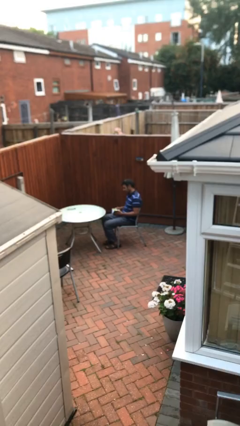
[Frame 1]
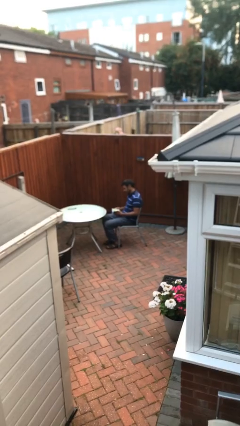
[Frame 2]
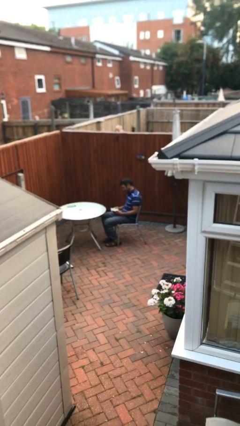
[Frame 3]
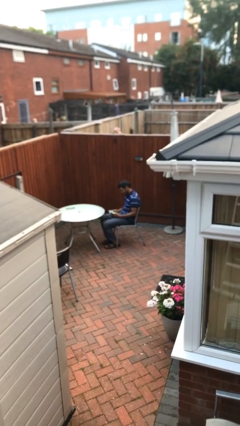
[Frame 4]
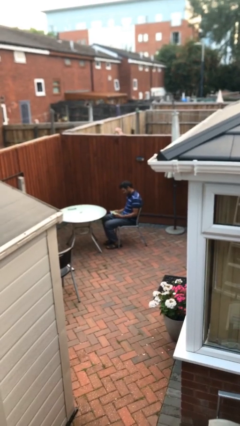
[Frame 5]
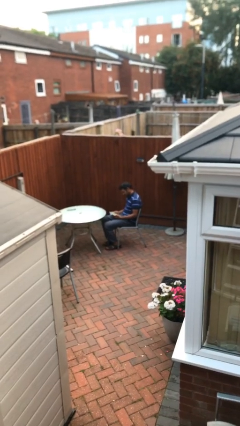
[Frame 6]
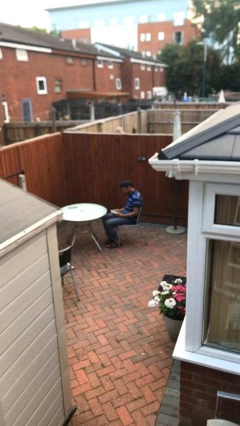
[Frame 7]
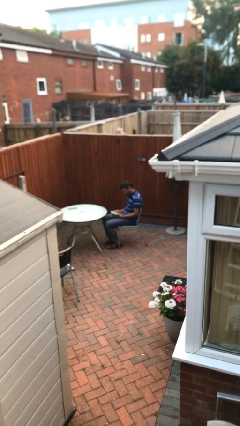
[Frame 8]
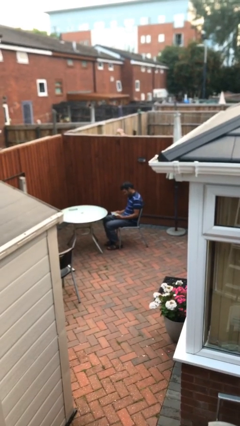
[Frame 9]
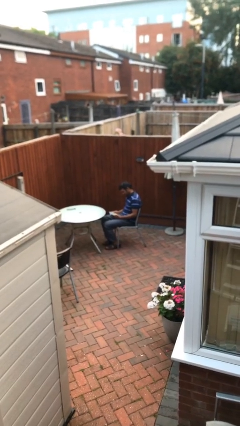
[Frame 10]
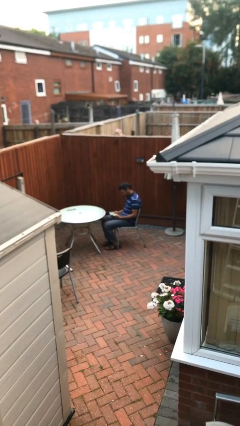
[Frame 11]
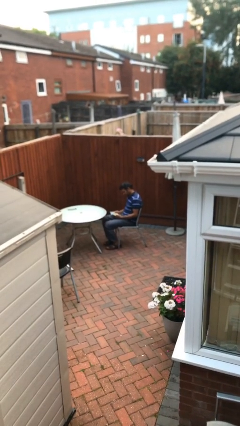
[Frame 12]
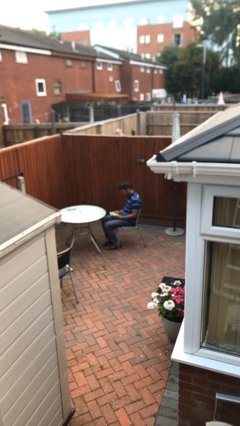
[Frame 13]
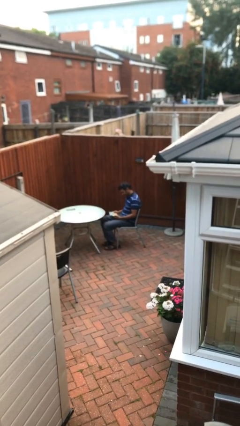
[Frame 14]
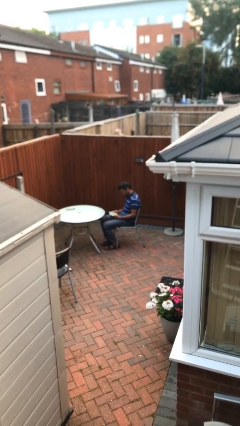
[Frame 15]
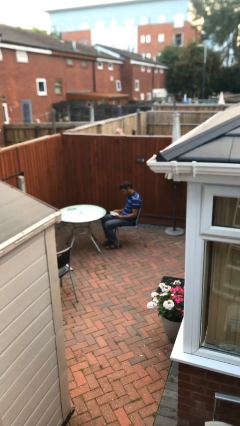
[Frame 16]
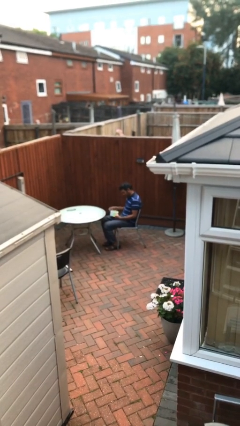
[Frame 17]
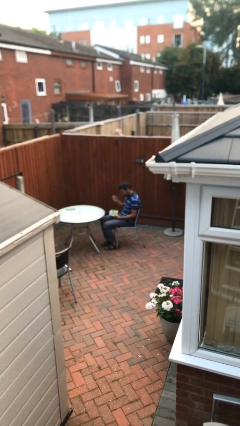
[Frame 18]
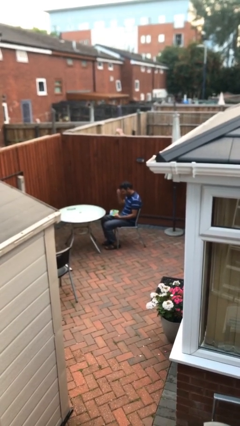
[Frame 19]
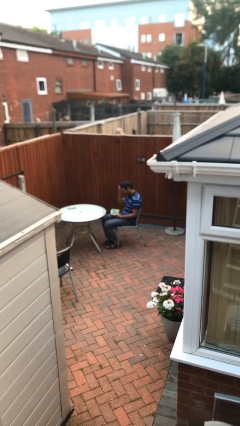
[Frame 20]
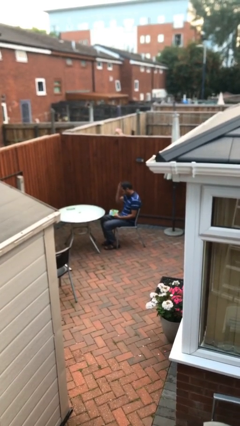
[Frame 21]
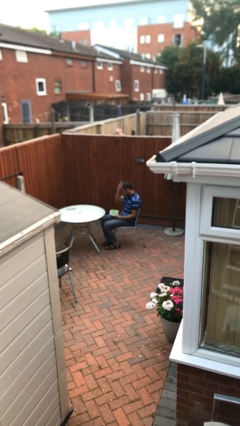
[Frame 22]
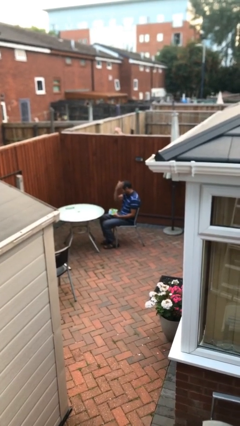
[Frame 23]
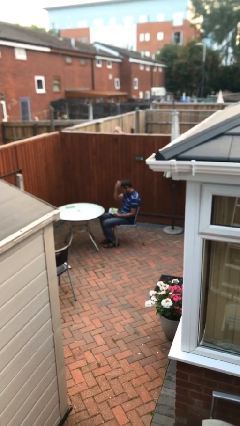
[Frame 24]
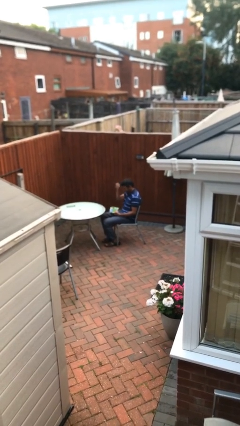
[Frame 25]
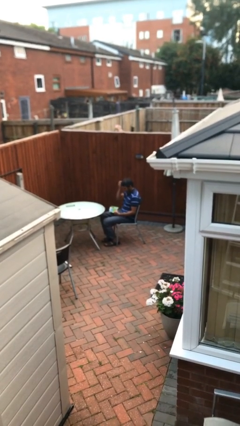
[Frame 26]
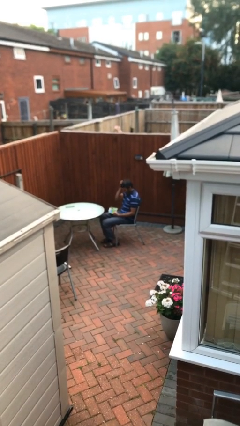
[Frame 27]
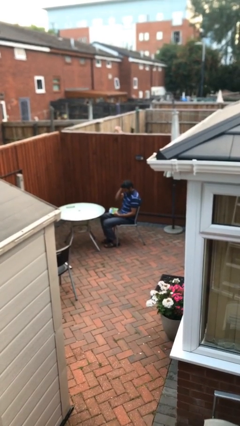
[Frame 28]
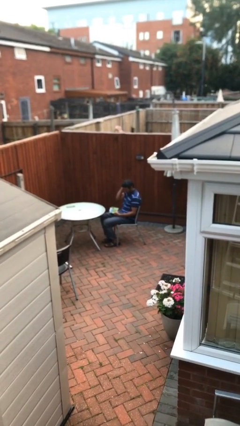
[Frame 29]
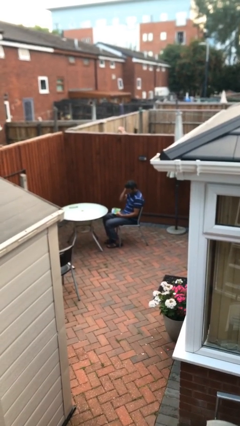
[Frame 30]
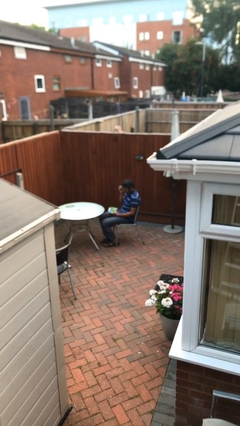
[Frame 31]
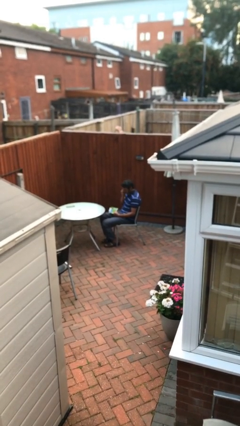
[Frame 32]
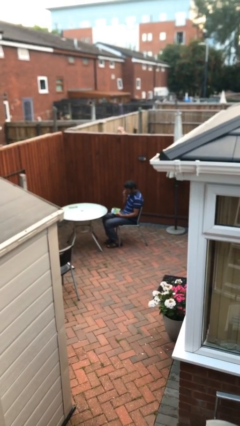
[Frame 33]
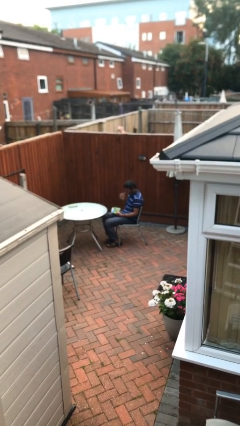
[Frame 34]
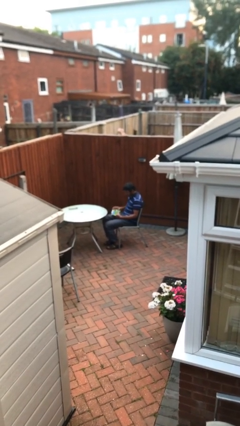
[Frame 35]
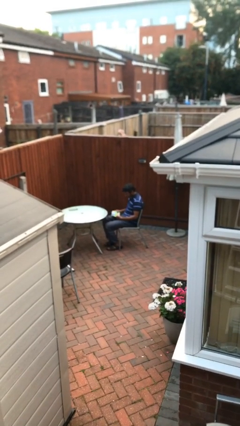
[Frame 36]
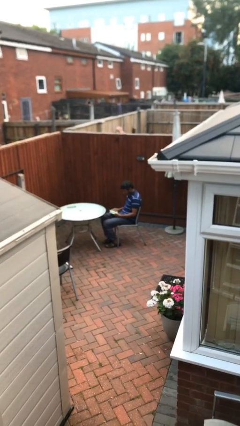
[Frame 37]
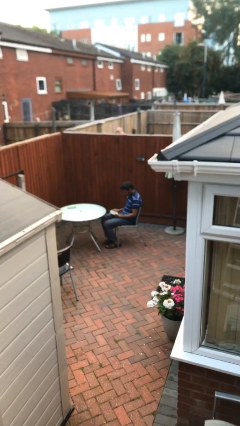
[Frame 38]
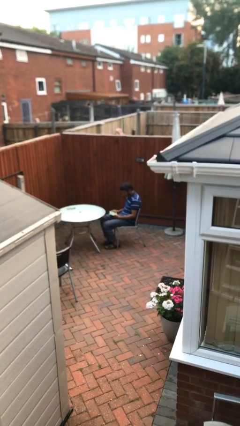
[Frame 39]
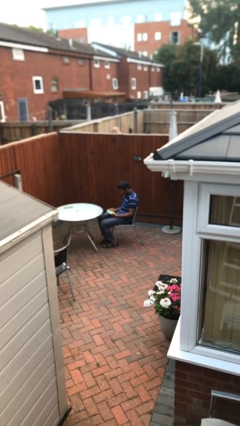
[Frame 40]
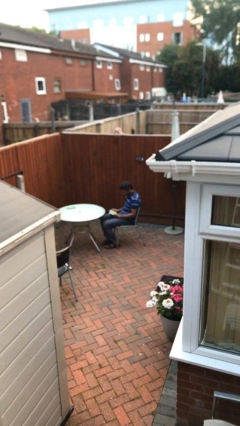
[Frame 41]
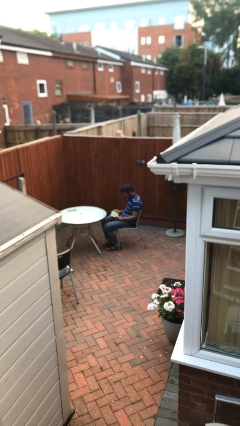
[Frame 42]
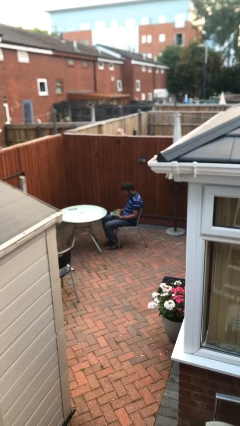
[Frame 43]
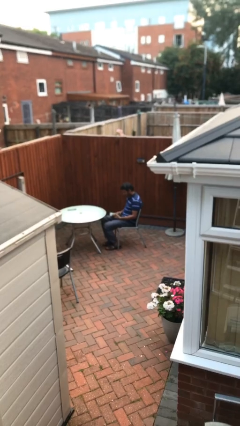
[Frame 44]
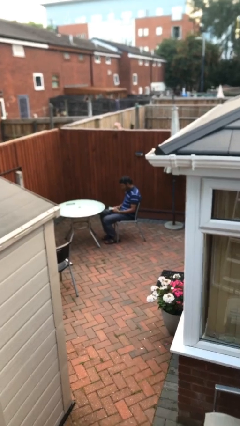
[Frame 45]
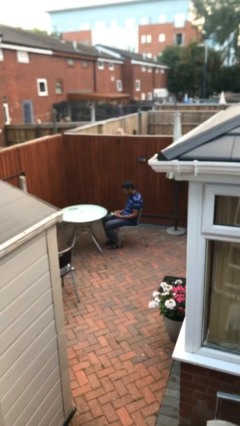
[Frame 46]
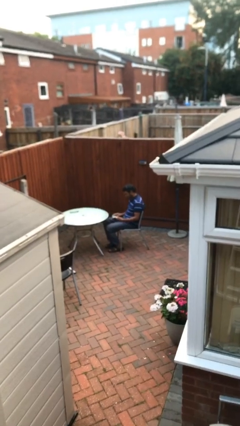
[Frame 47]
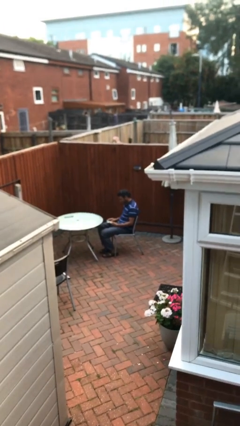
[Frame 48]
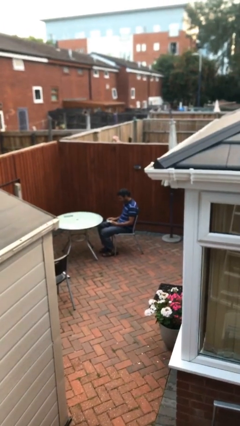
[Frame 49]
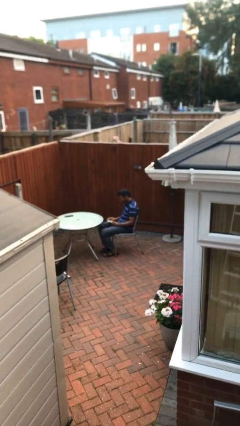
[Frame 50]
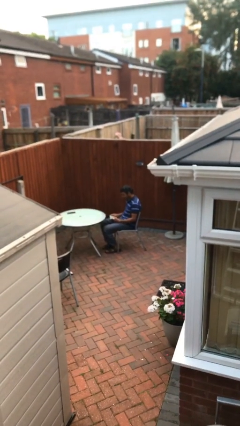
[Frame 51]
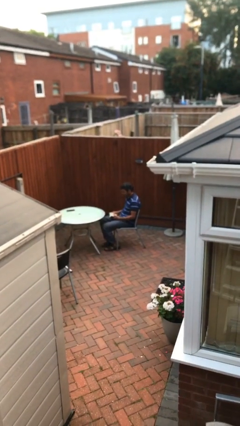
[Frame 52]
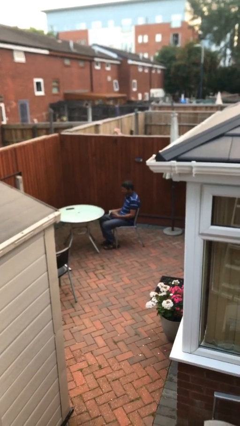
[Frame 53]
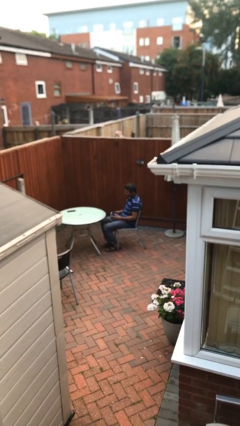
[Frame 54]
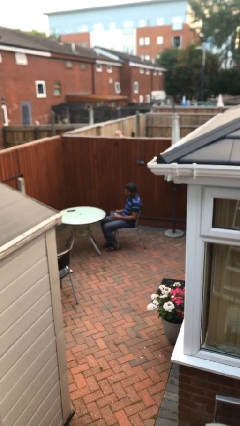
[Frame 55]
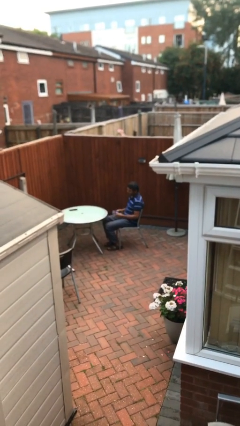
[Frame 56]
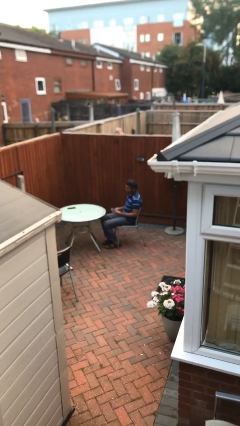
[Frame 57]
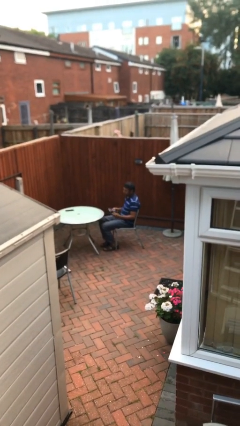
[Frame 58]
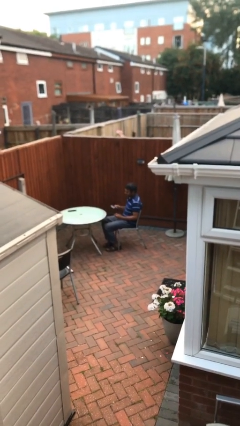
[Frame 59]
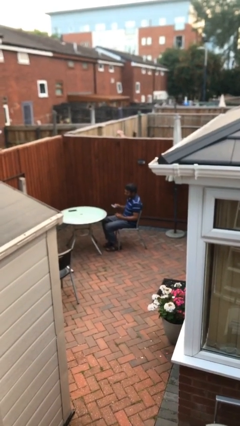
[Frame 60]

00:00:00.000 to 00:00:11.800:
person reads document

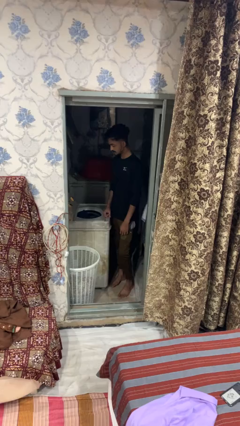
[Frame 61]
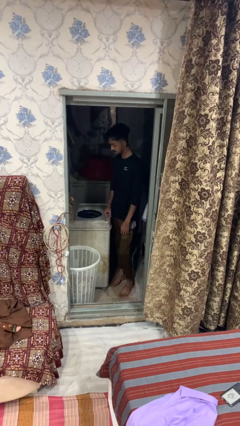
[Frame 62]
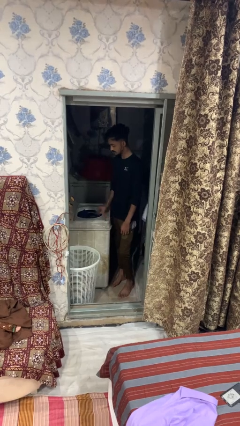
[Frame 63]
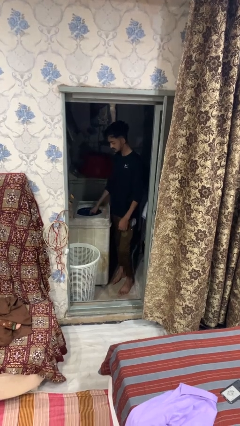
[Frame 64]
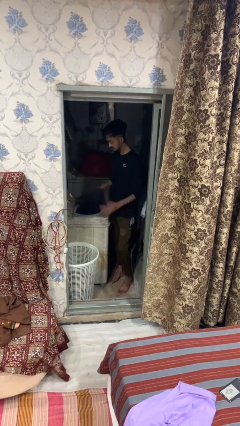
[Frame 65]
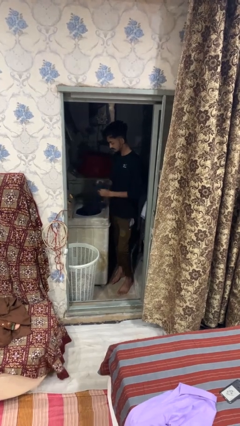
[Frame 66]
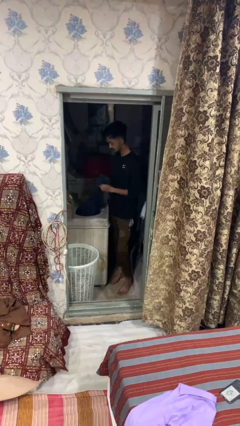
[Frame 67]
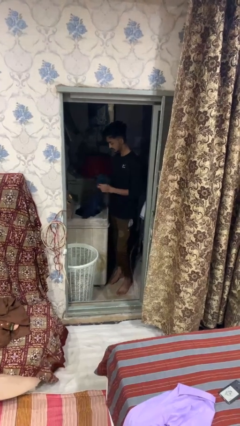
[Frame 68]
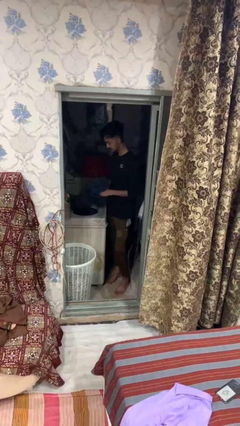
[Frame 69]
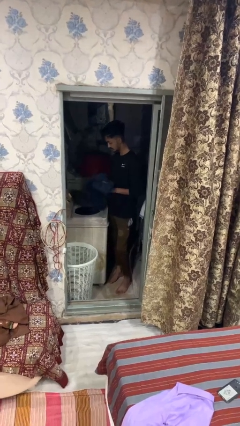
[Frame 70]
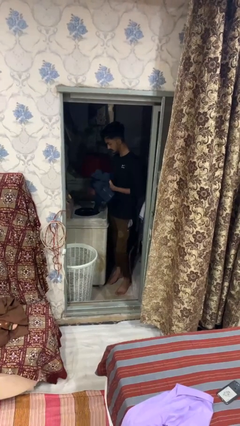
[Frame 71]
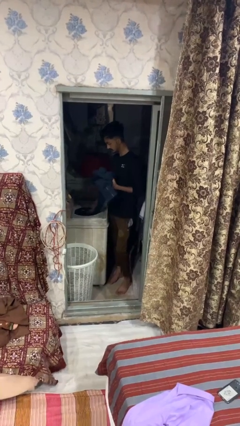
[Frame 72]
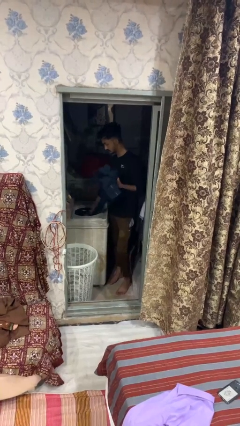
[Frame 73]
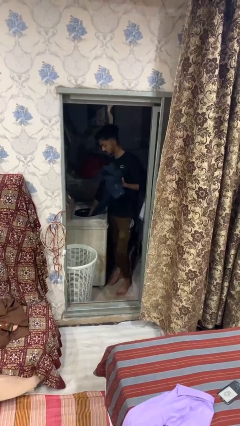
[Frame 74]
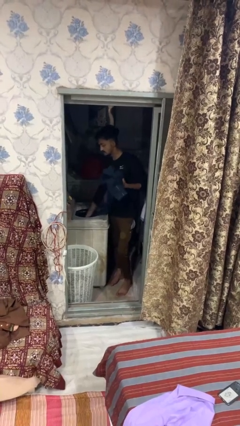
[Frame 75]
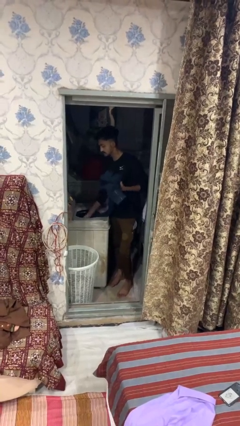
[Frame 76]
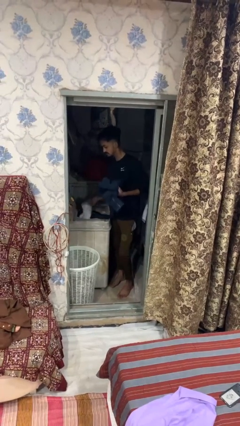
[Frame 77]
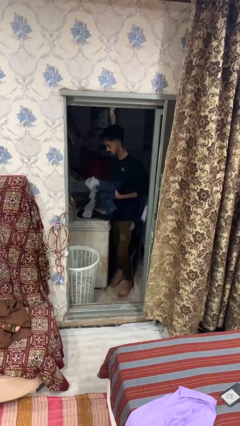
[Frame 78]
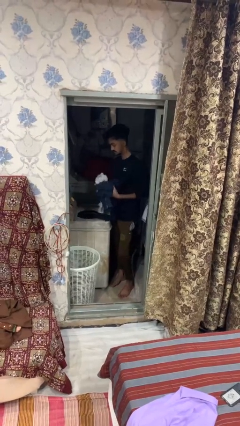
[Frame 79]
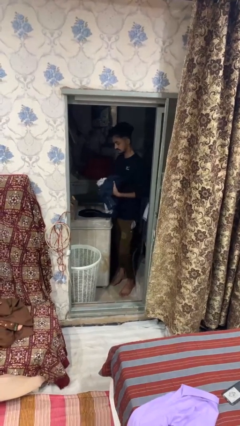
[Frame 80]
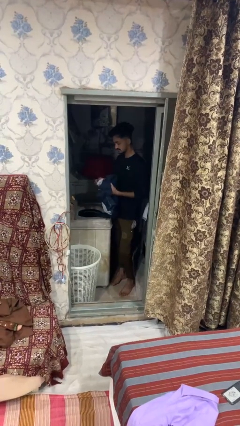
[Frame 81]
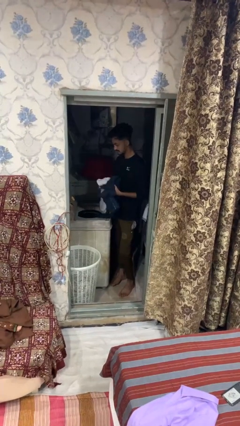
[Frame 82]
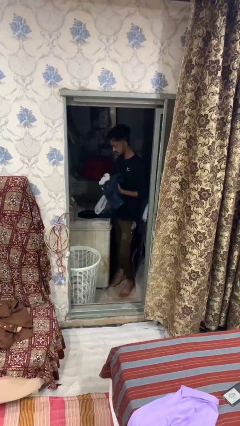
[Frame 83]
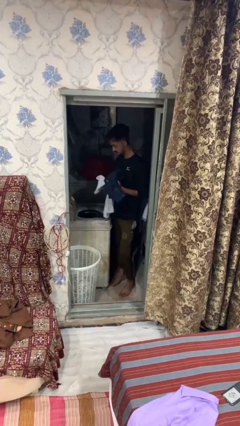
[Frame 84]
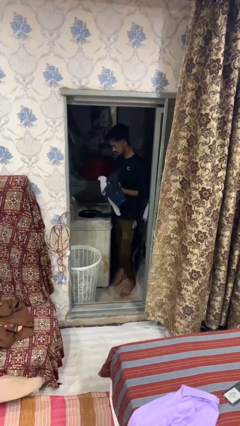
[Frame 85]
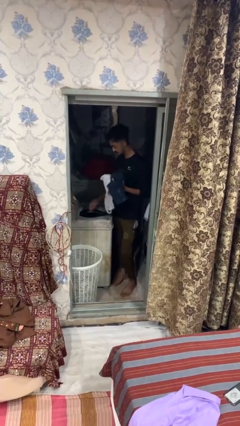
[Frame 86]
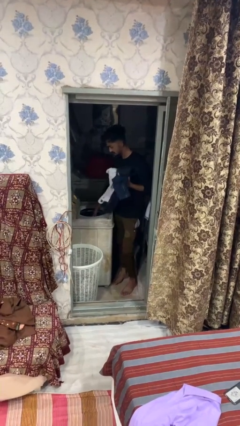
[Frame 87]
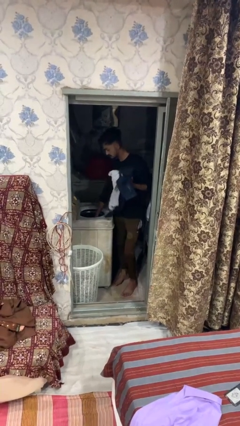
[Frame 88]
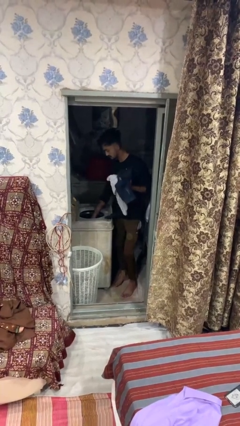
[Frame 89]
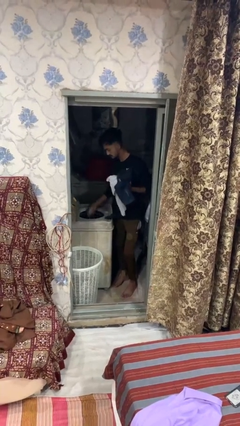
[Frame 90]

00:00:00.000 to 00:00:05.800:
person unloads clotheswasher

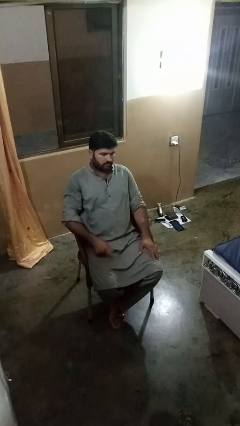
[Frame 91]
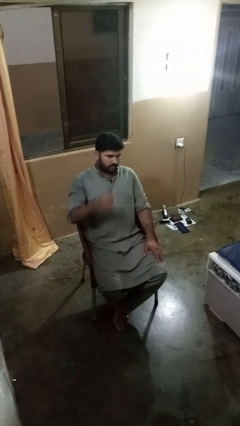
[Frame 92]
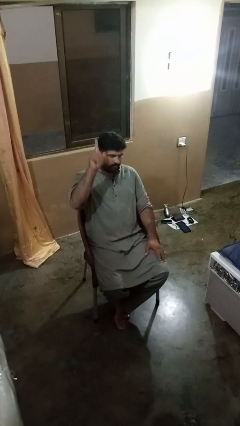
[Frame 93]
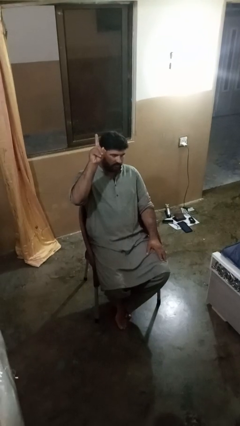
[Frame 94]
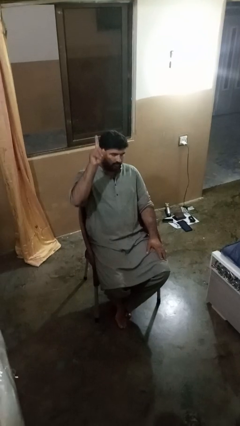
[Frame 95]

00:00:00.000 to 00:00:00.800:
person gestures number one
